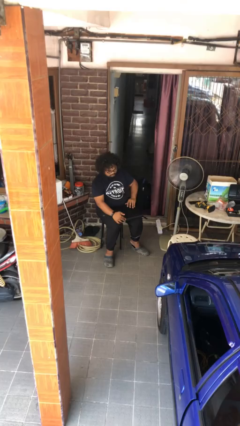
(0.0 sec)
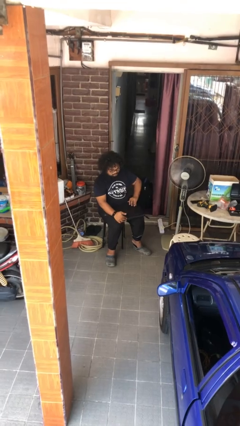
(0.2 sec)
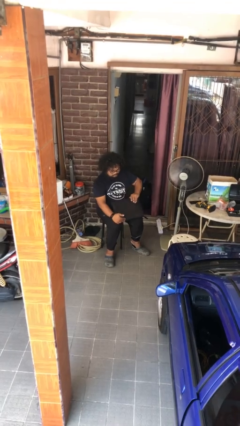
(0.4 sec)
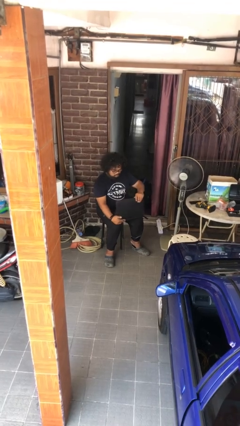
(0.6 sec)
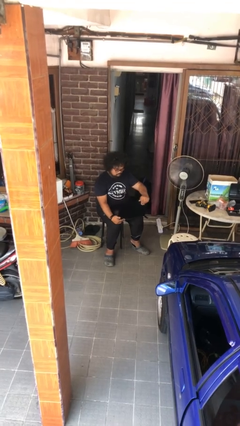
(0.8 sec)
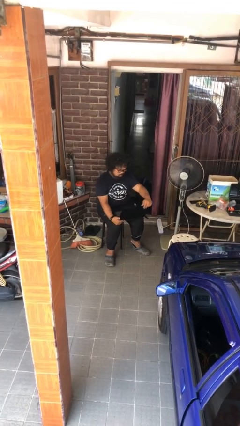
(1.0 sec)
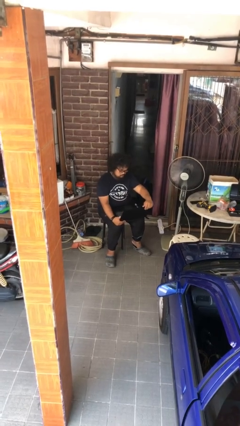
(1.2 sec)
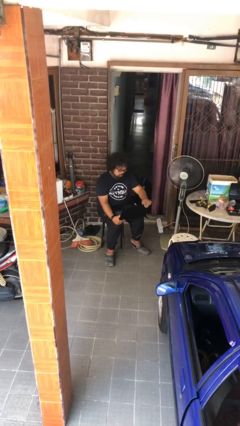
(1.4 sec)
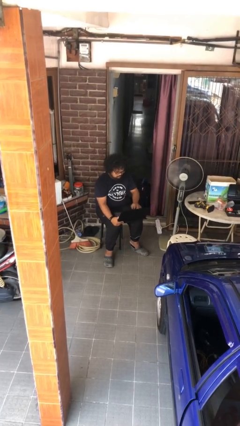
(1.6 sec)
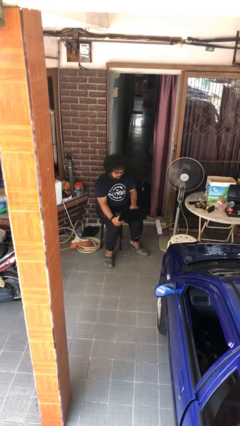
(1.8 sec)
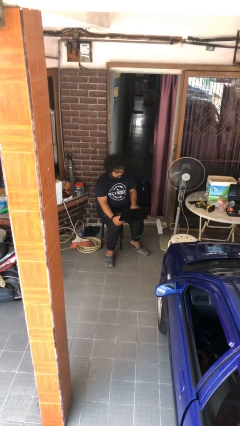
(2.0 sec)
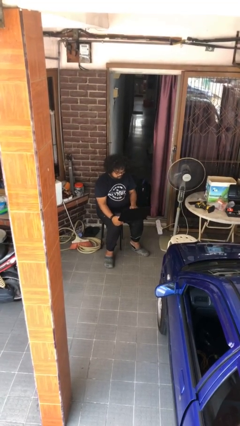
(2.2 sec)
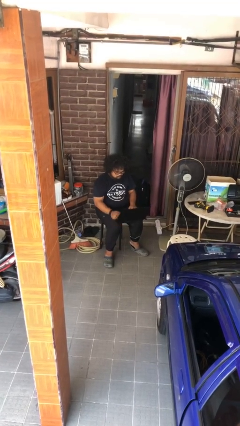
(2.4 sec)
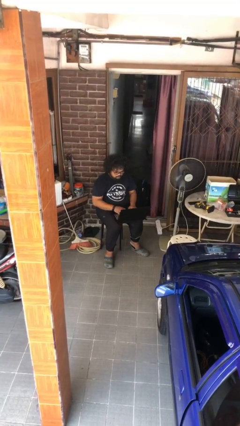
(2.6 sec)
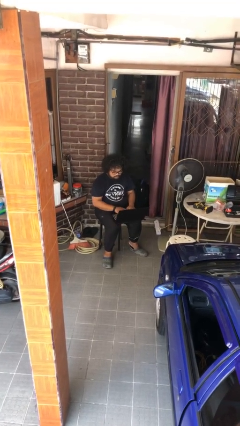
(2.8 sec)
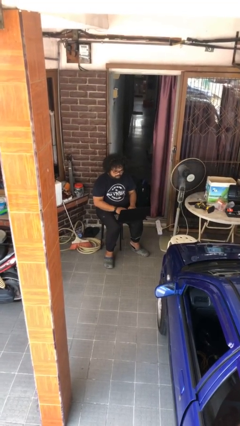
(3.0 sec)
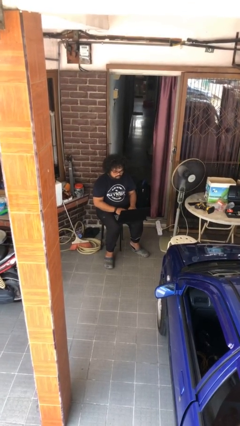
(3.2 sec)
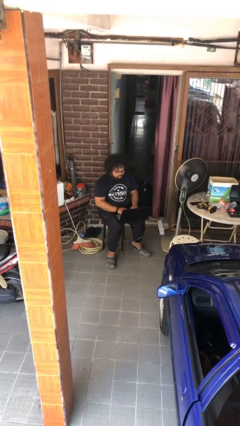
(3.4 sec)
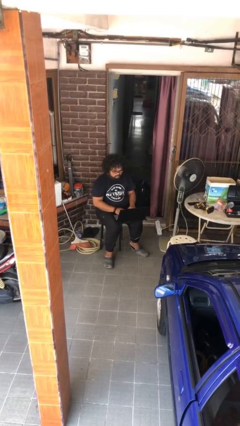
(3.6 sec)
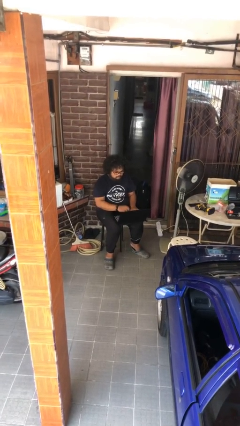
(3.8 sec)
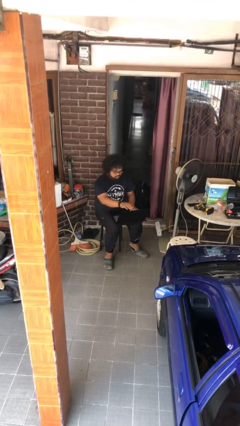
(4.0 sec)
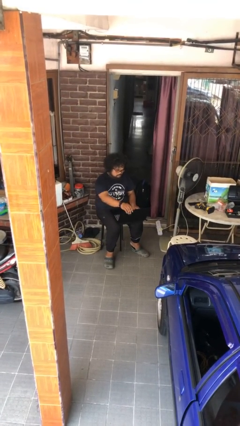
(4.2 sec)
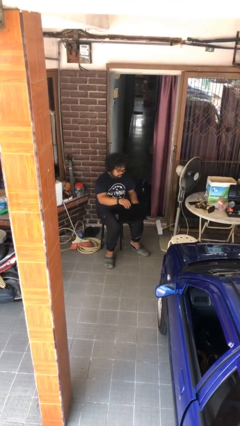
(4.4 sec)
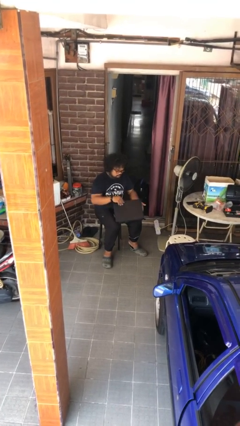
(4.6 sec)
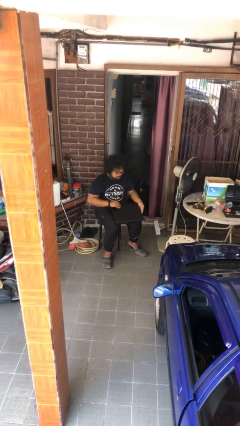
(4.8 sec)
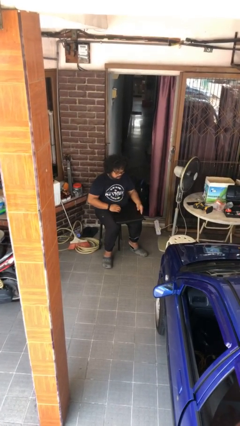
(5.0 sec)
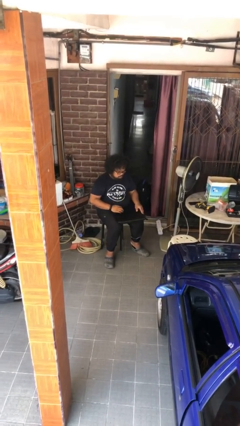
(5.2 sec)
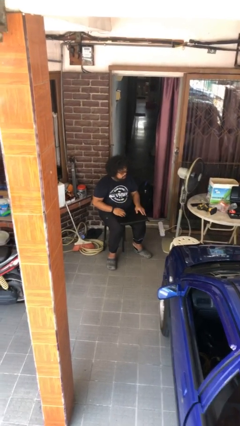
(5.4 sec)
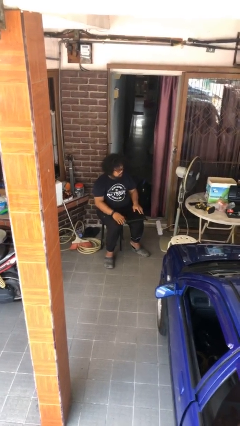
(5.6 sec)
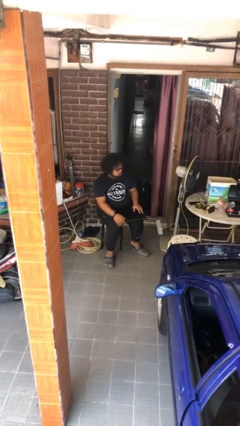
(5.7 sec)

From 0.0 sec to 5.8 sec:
person interacts with laptop

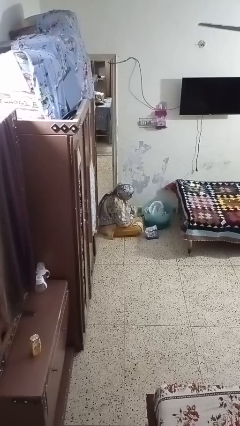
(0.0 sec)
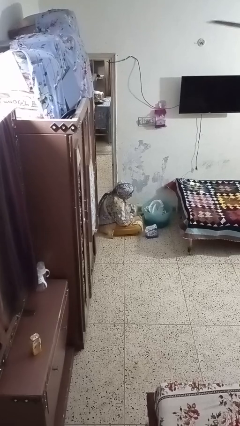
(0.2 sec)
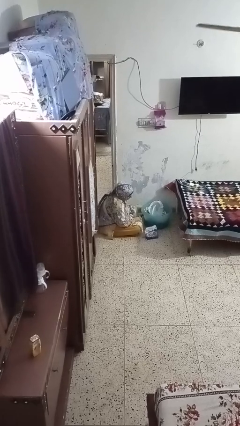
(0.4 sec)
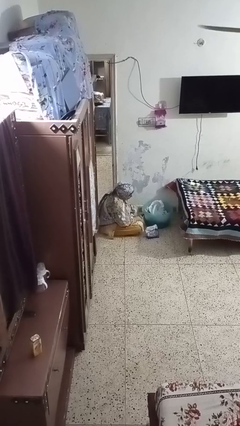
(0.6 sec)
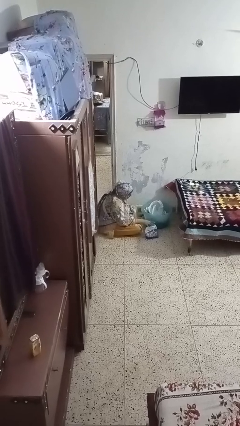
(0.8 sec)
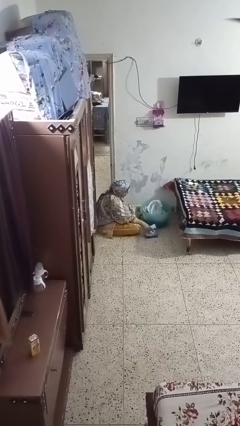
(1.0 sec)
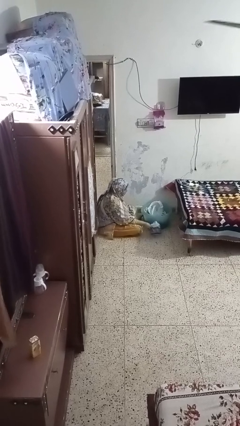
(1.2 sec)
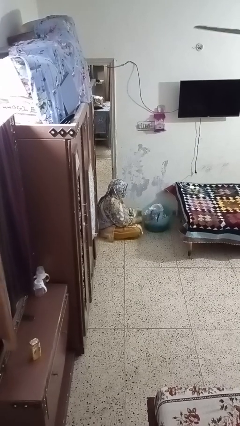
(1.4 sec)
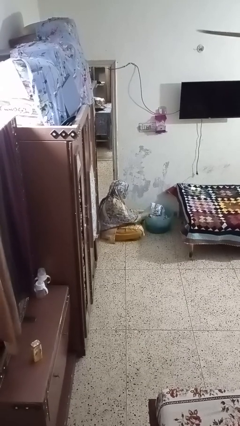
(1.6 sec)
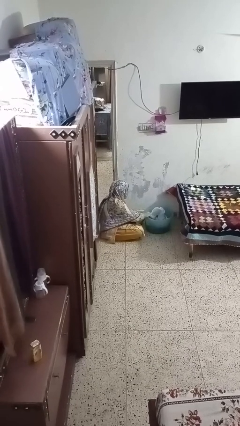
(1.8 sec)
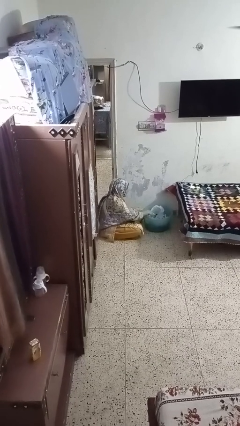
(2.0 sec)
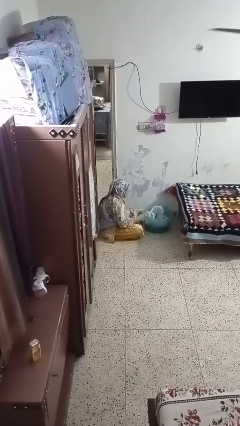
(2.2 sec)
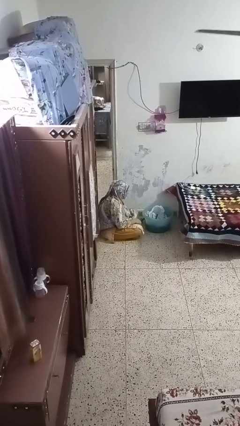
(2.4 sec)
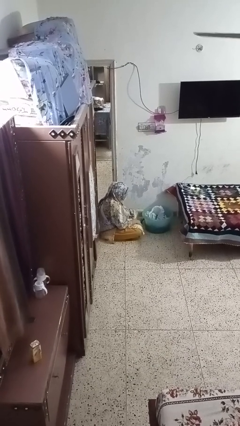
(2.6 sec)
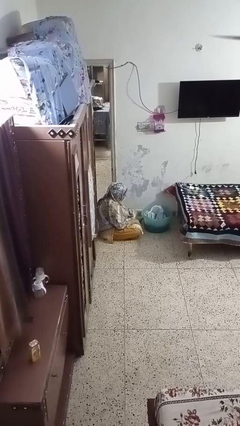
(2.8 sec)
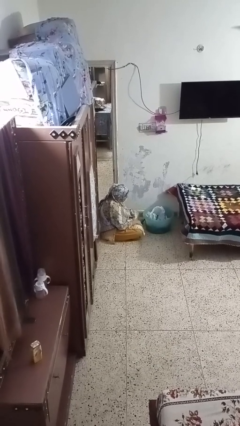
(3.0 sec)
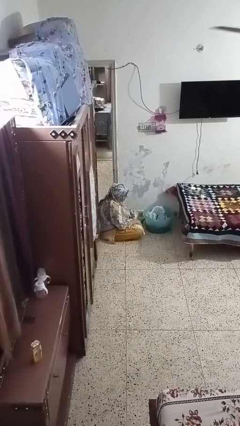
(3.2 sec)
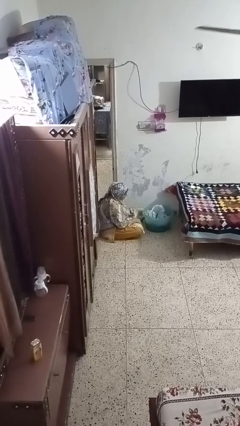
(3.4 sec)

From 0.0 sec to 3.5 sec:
person puts object into basket

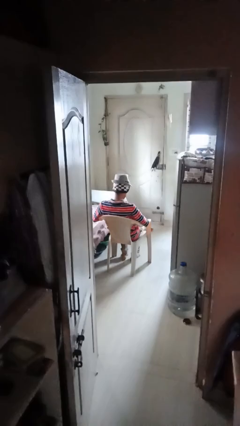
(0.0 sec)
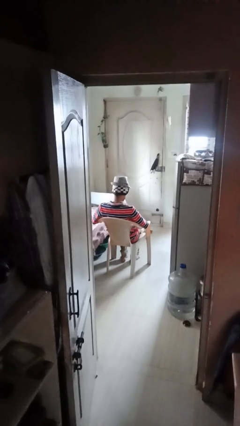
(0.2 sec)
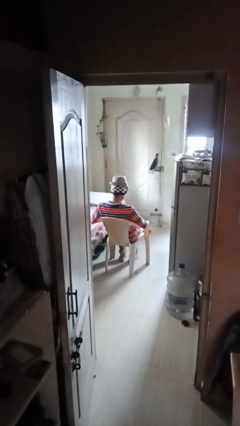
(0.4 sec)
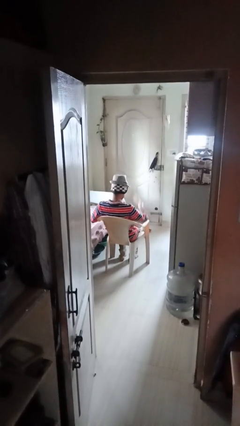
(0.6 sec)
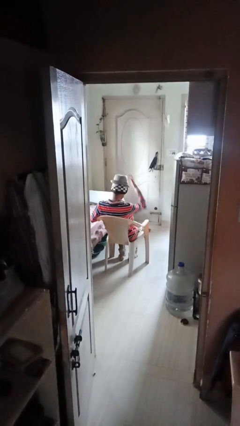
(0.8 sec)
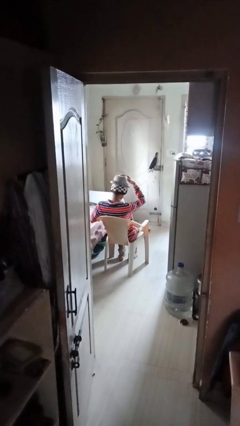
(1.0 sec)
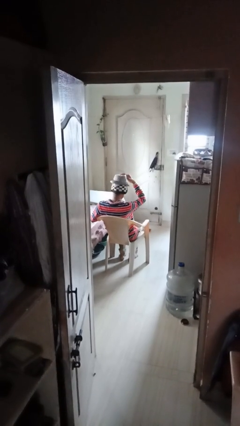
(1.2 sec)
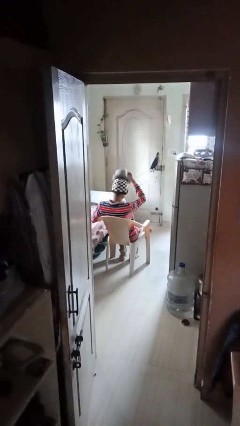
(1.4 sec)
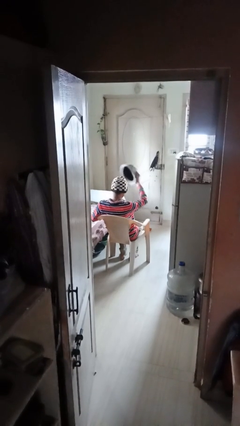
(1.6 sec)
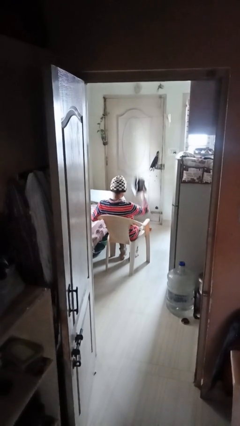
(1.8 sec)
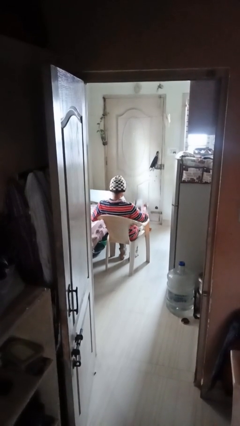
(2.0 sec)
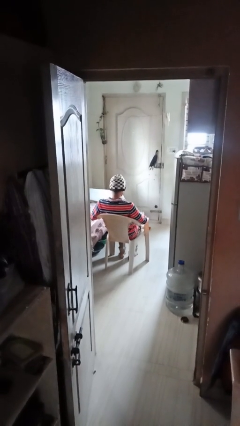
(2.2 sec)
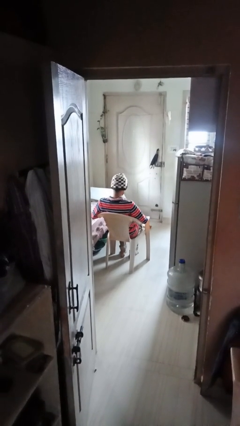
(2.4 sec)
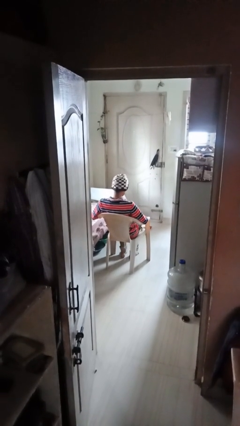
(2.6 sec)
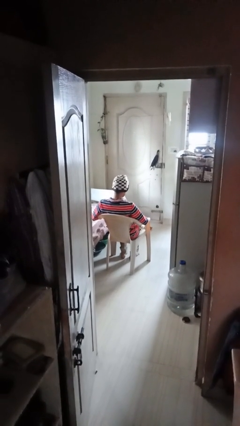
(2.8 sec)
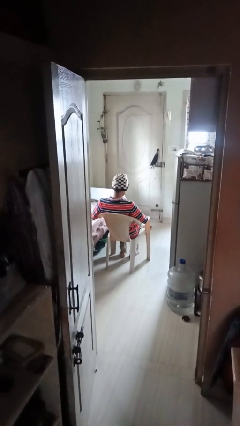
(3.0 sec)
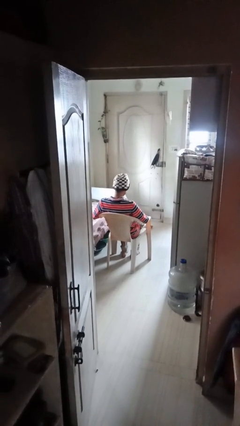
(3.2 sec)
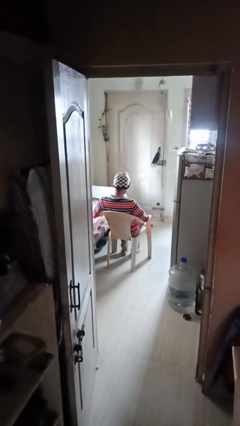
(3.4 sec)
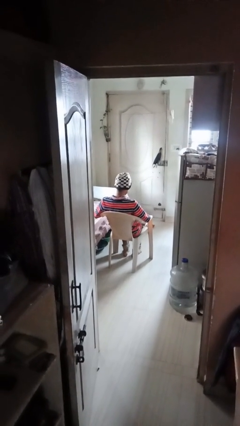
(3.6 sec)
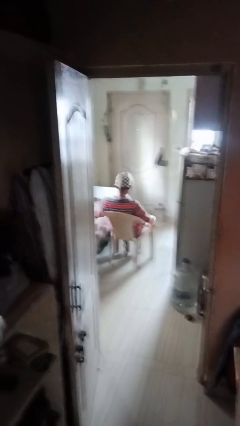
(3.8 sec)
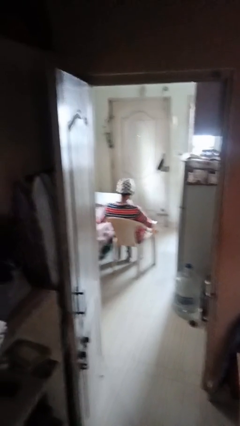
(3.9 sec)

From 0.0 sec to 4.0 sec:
person takes off hat

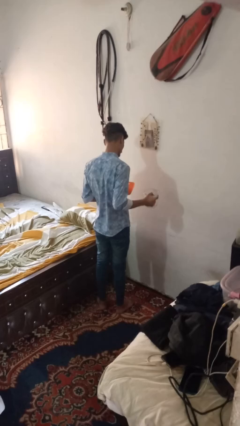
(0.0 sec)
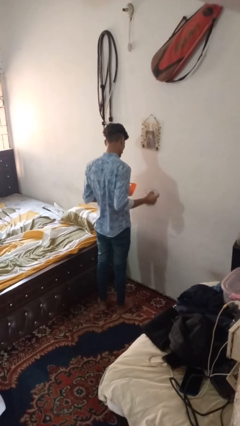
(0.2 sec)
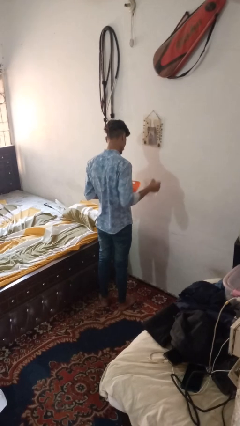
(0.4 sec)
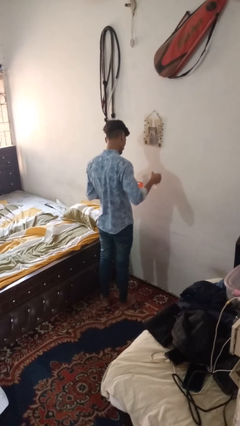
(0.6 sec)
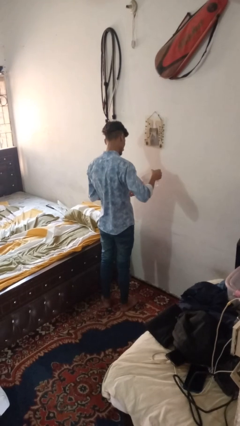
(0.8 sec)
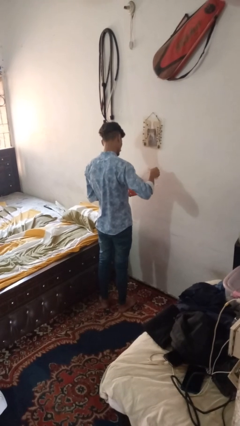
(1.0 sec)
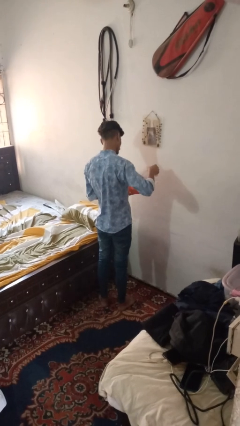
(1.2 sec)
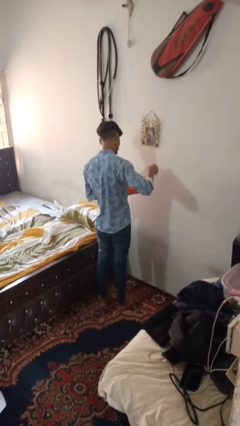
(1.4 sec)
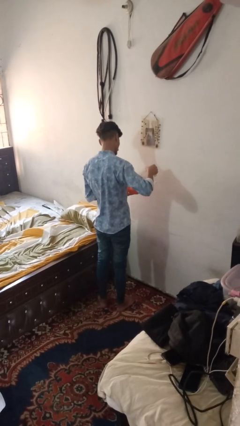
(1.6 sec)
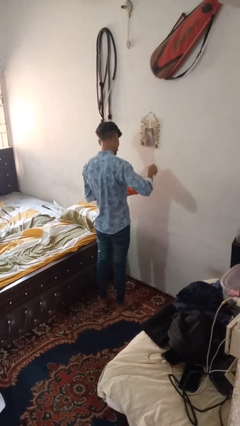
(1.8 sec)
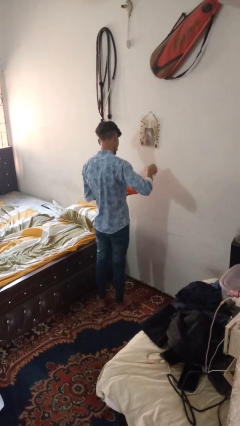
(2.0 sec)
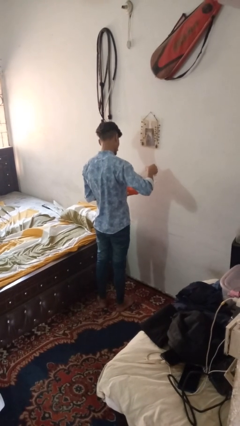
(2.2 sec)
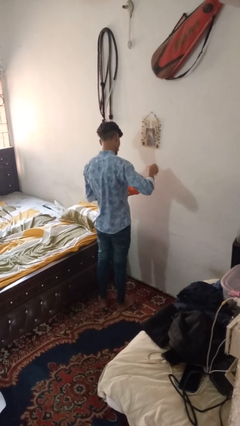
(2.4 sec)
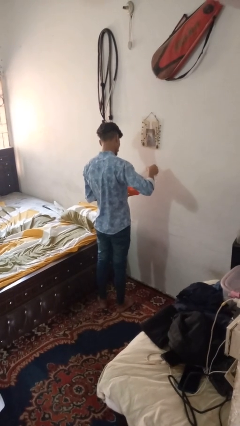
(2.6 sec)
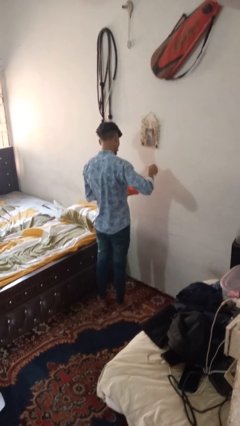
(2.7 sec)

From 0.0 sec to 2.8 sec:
person pours into bowl

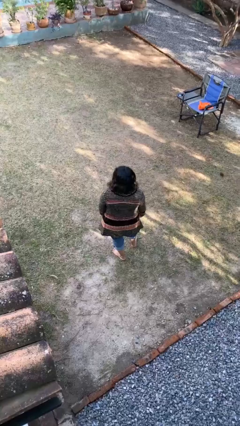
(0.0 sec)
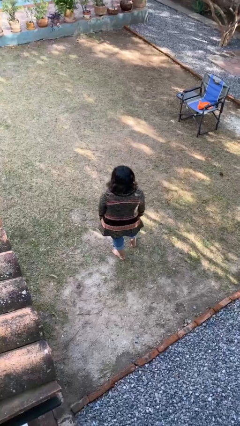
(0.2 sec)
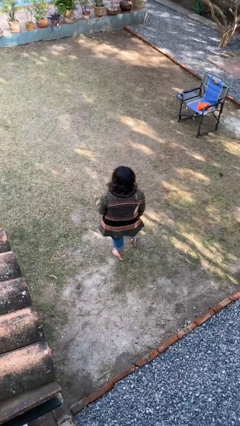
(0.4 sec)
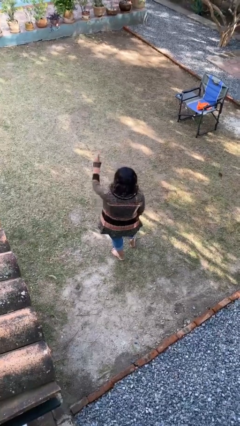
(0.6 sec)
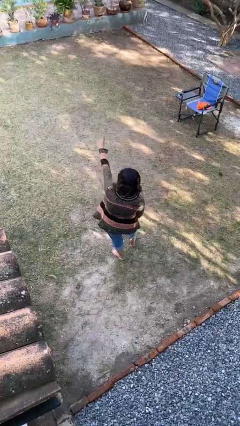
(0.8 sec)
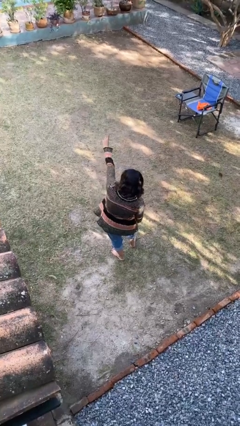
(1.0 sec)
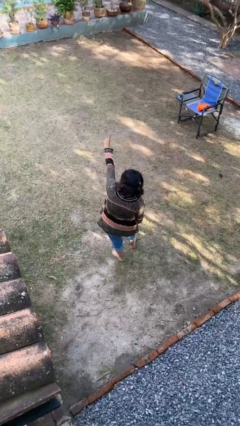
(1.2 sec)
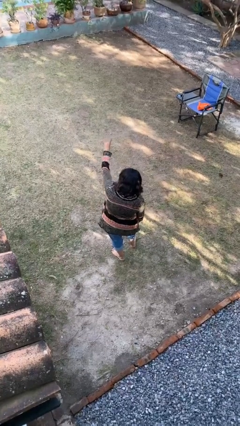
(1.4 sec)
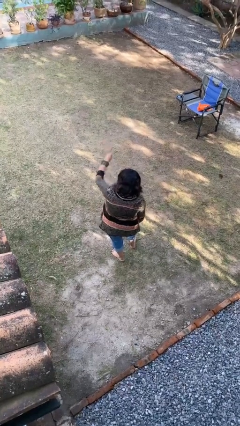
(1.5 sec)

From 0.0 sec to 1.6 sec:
person gestures number one

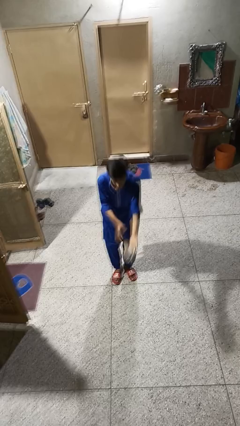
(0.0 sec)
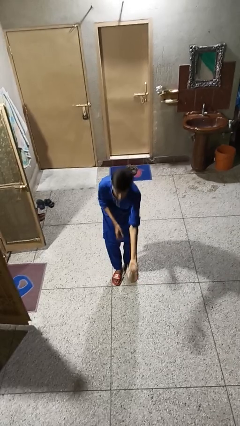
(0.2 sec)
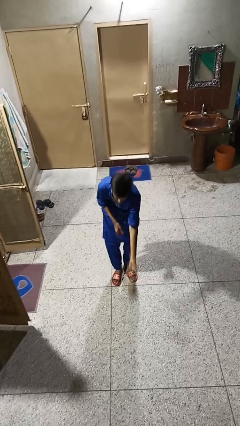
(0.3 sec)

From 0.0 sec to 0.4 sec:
person catches dropped object
